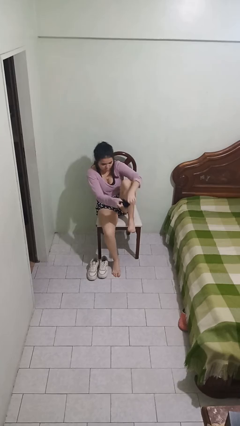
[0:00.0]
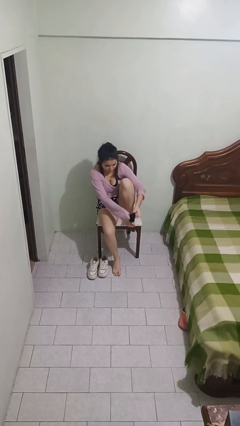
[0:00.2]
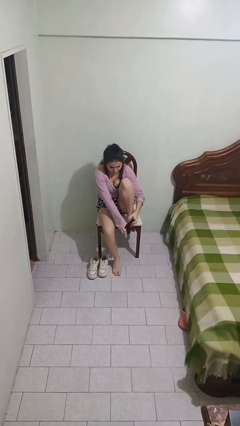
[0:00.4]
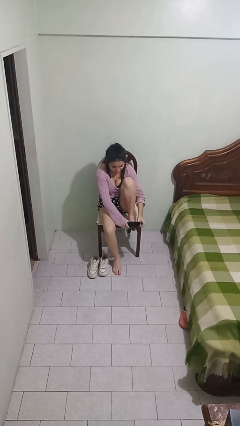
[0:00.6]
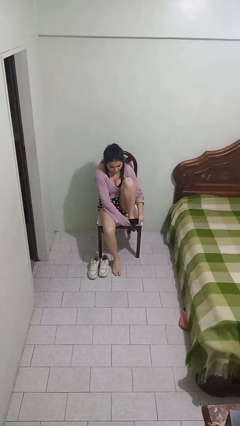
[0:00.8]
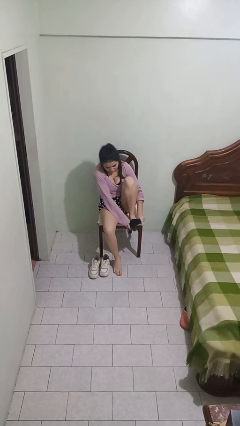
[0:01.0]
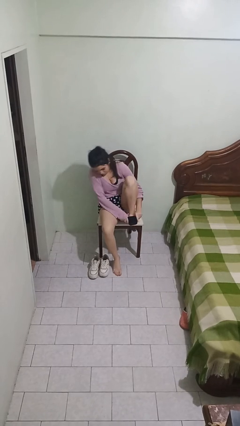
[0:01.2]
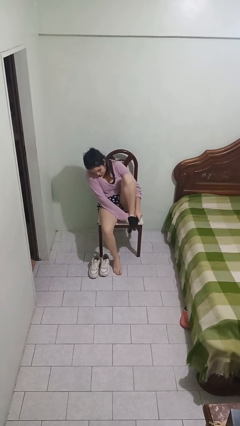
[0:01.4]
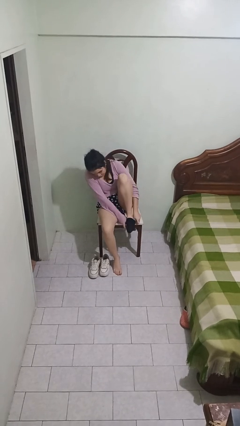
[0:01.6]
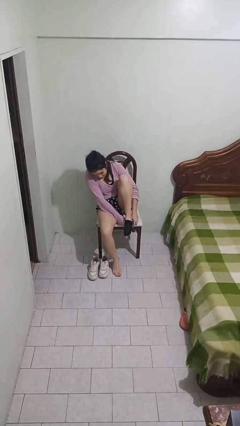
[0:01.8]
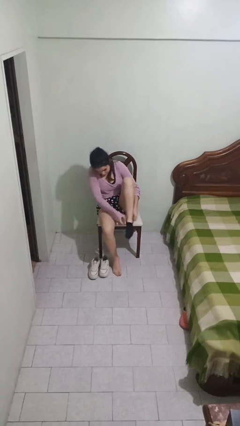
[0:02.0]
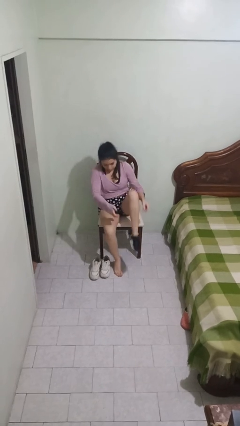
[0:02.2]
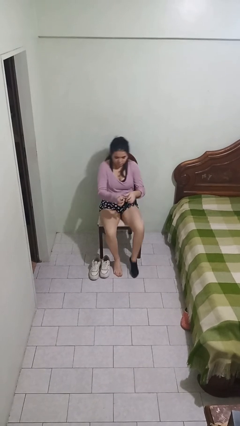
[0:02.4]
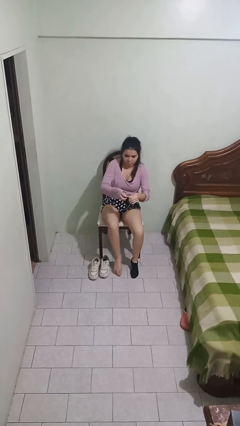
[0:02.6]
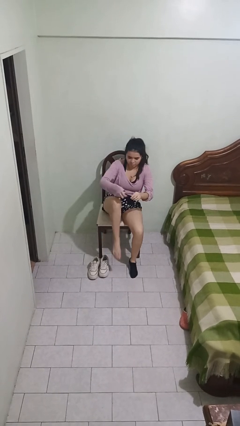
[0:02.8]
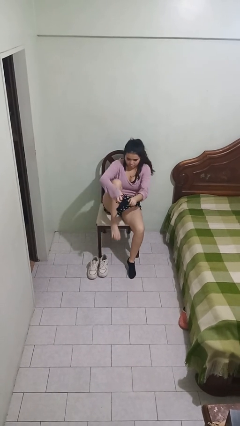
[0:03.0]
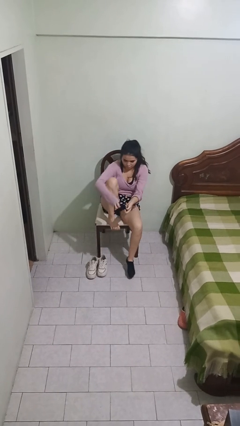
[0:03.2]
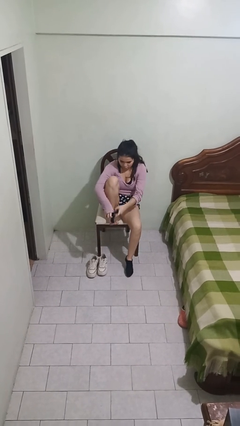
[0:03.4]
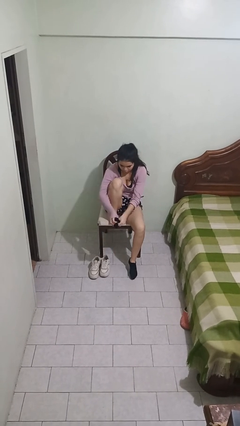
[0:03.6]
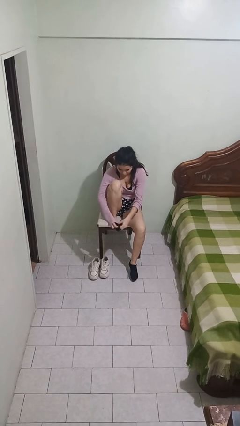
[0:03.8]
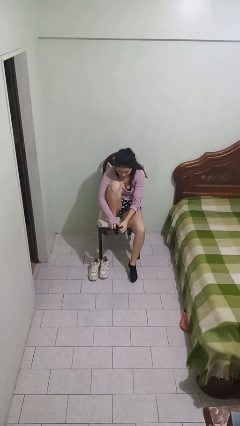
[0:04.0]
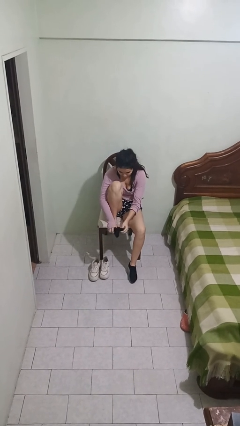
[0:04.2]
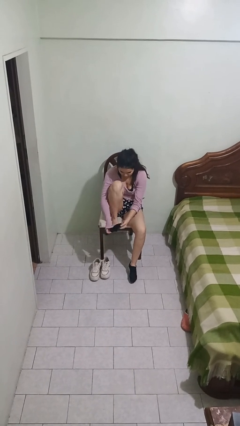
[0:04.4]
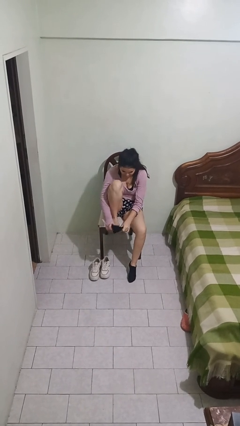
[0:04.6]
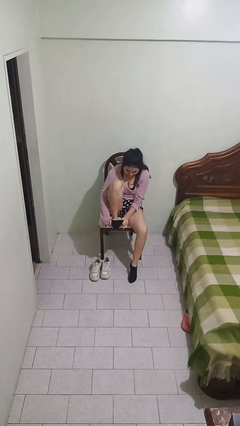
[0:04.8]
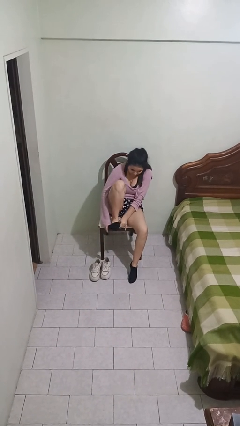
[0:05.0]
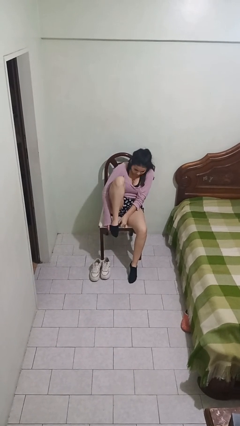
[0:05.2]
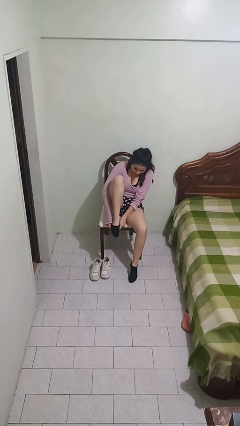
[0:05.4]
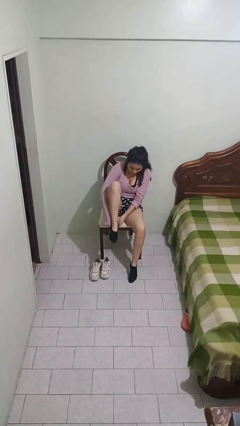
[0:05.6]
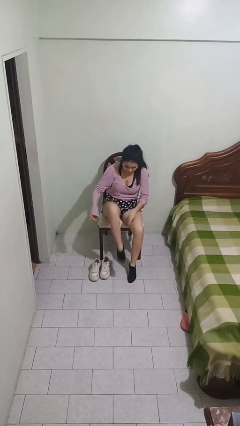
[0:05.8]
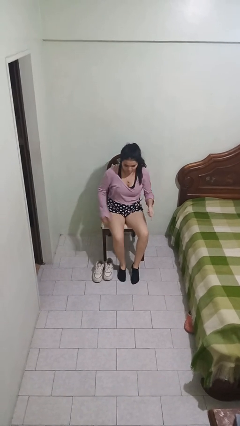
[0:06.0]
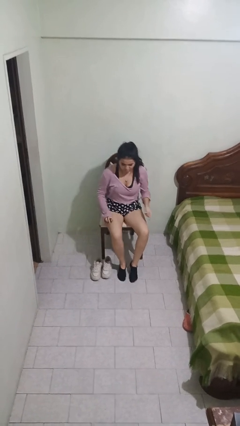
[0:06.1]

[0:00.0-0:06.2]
person puts on socks

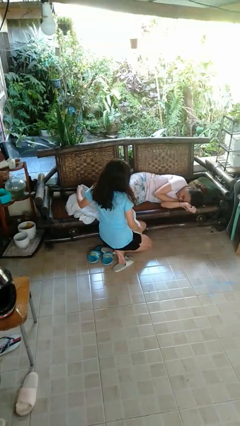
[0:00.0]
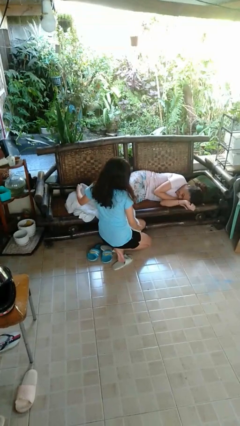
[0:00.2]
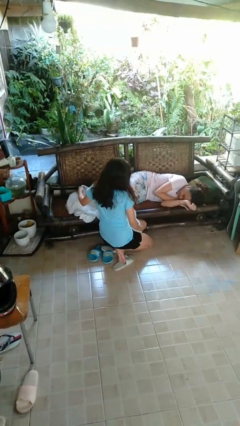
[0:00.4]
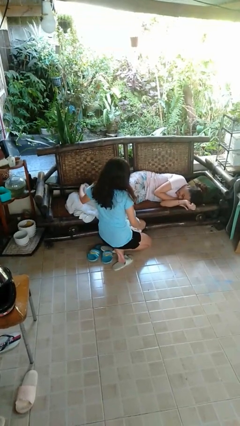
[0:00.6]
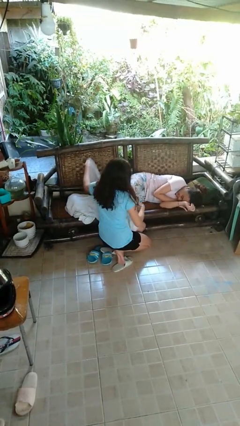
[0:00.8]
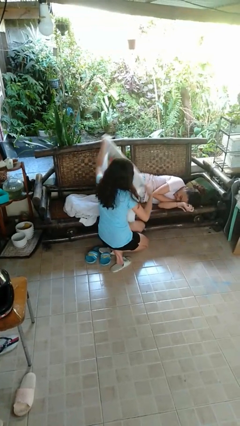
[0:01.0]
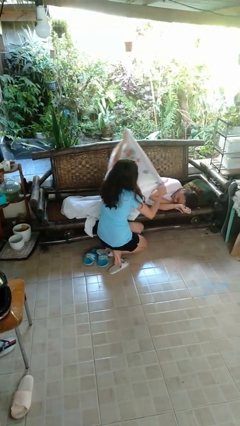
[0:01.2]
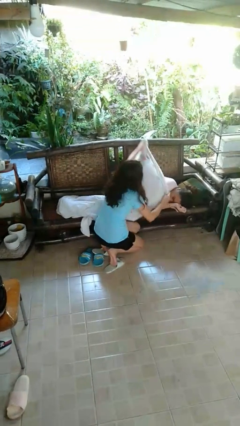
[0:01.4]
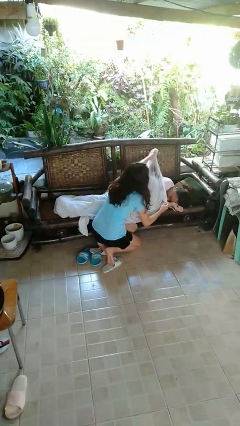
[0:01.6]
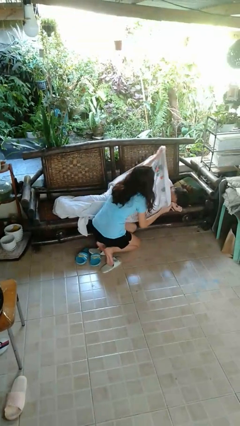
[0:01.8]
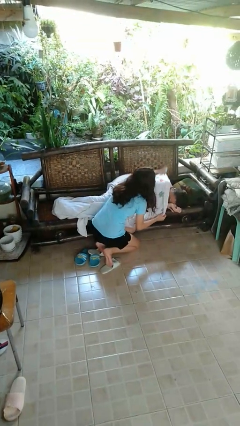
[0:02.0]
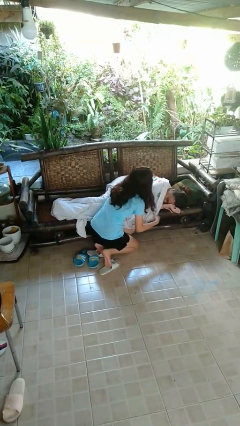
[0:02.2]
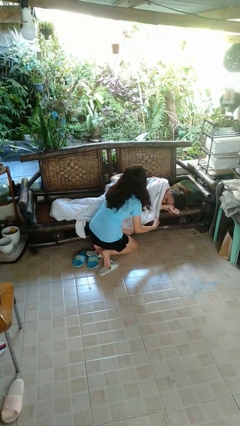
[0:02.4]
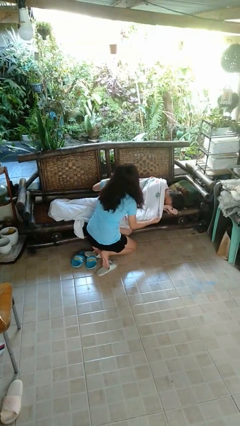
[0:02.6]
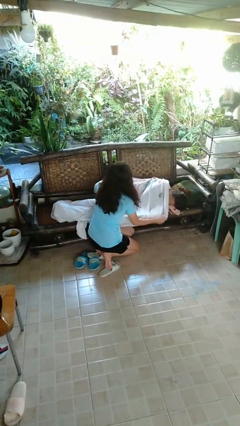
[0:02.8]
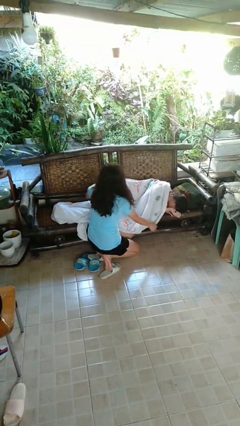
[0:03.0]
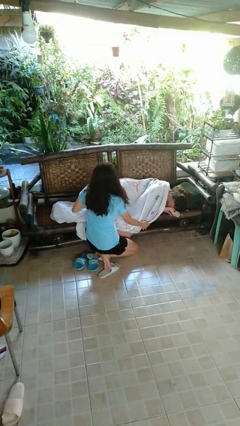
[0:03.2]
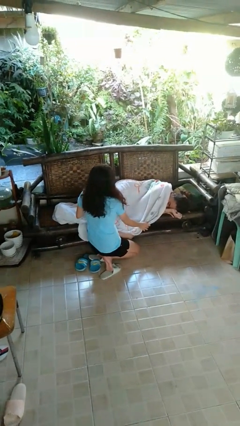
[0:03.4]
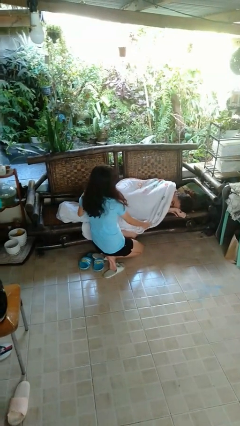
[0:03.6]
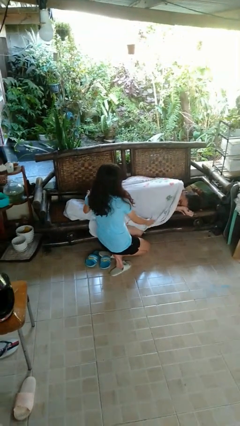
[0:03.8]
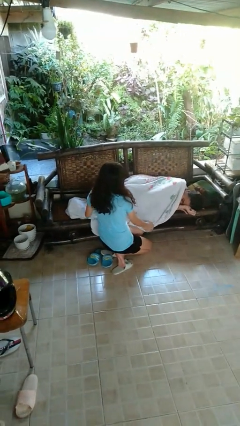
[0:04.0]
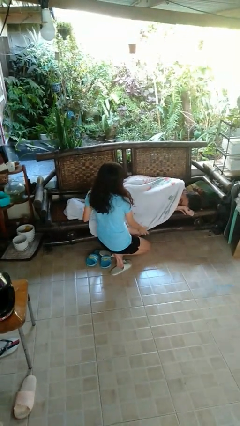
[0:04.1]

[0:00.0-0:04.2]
person covers friend with blanket

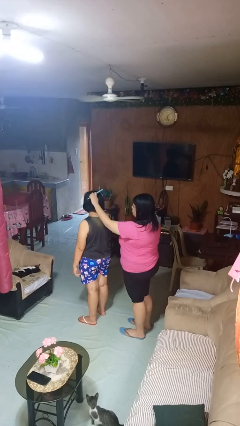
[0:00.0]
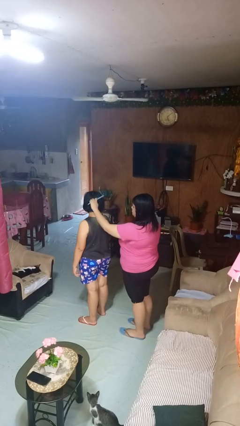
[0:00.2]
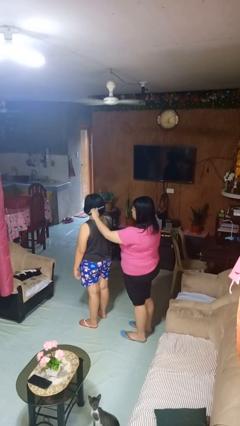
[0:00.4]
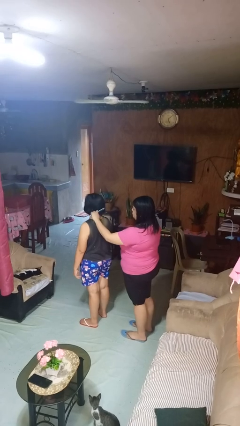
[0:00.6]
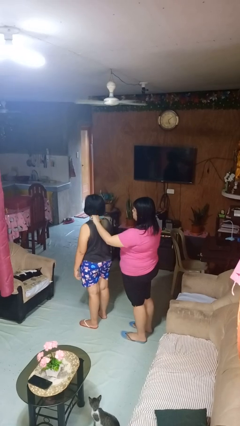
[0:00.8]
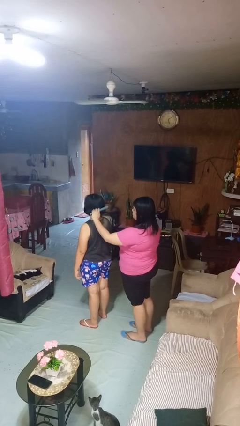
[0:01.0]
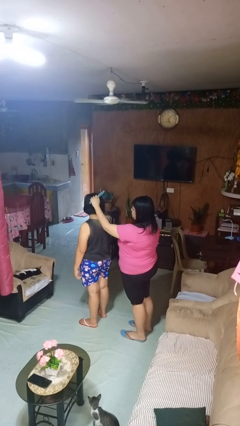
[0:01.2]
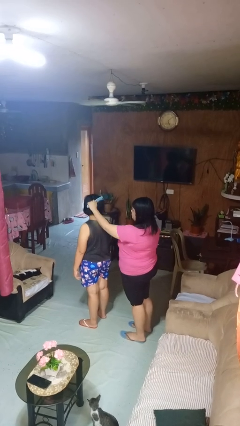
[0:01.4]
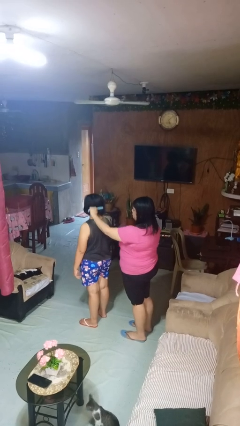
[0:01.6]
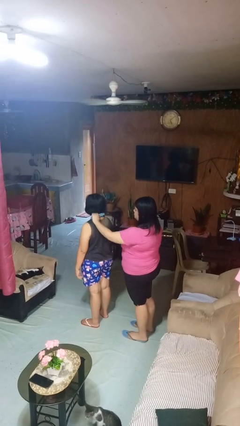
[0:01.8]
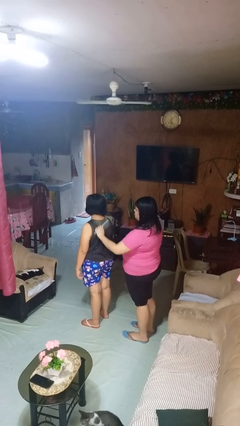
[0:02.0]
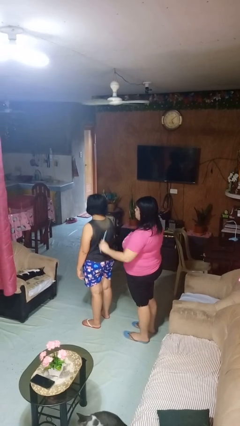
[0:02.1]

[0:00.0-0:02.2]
person brushes hair of person

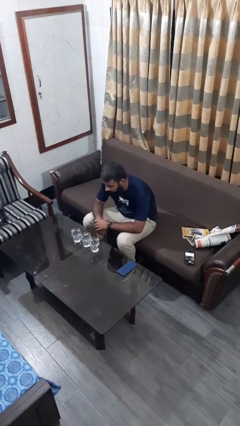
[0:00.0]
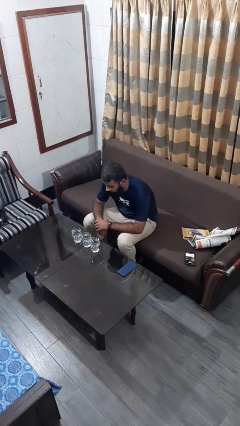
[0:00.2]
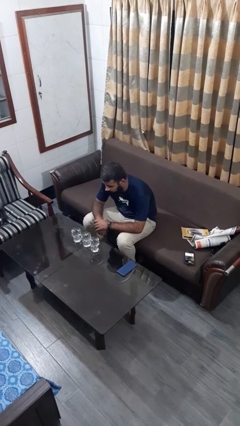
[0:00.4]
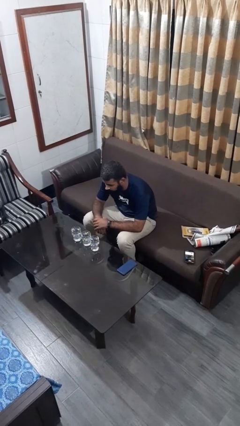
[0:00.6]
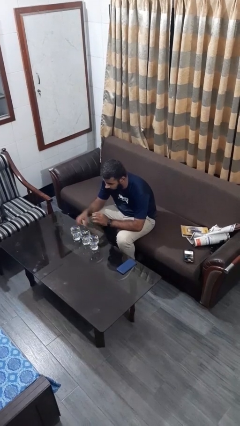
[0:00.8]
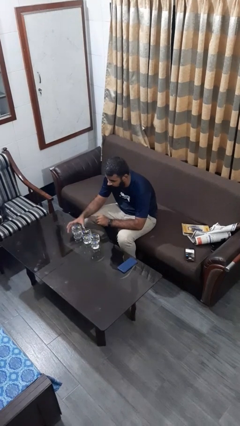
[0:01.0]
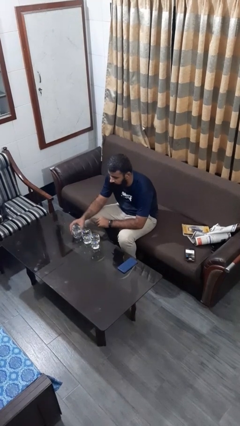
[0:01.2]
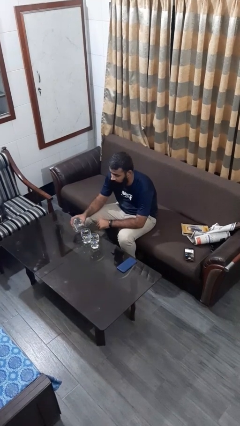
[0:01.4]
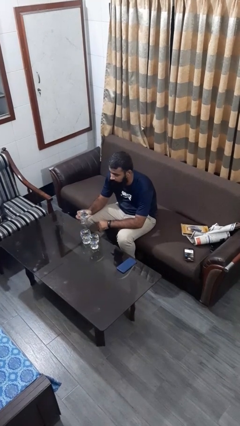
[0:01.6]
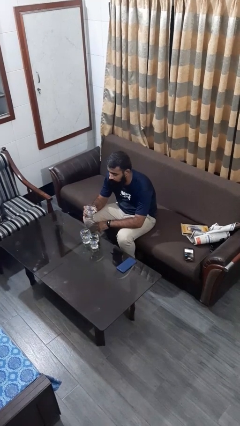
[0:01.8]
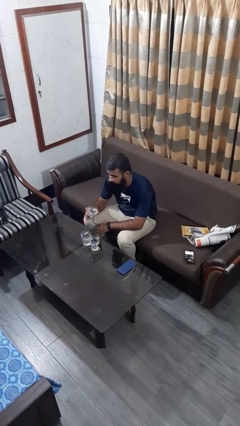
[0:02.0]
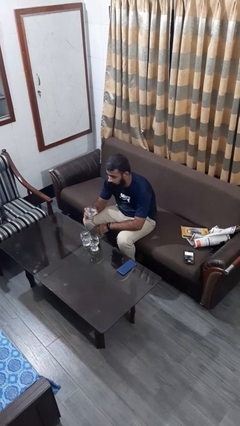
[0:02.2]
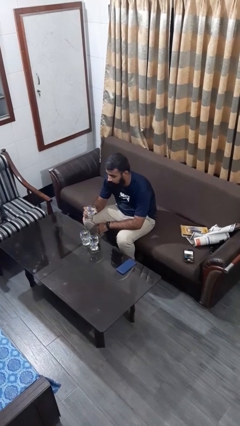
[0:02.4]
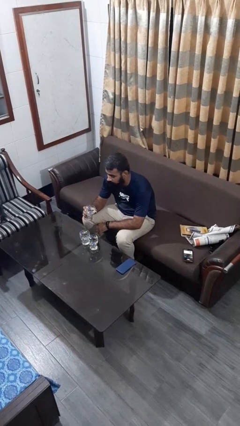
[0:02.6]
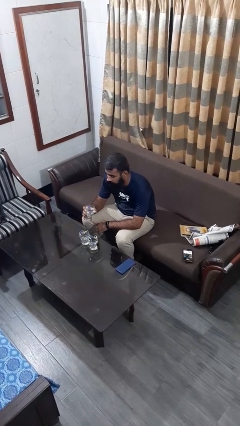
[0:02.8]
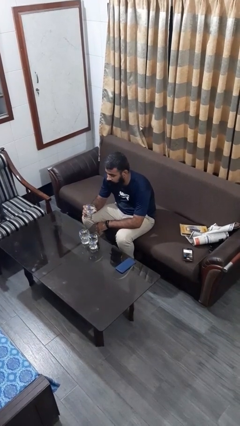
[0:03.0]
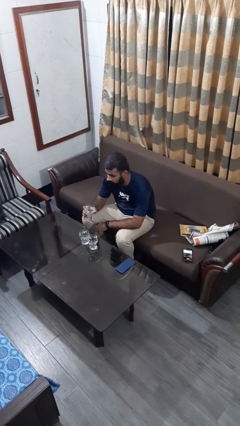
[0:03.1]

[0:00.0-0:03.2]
person picks up object from table

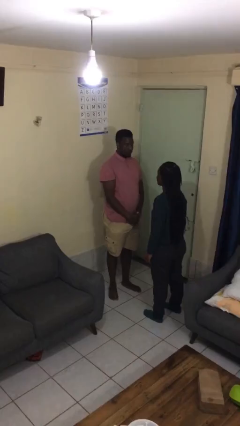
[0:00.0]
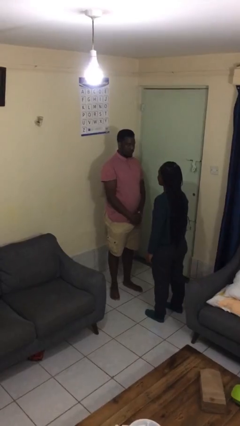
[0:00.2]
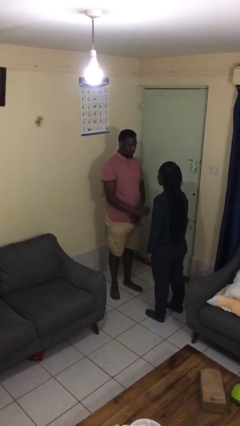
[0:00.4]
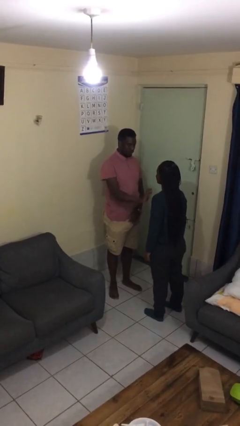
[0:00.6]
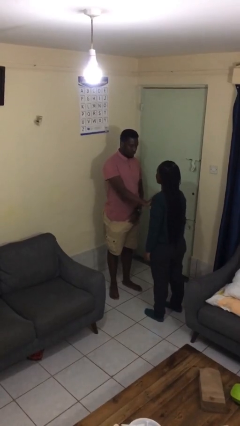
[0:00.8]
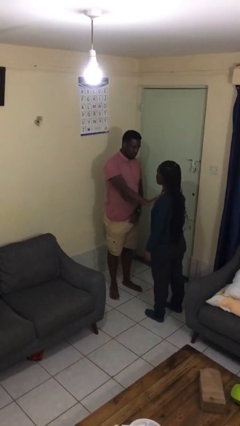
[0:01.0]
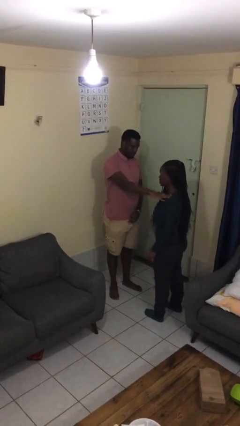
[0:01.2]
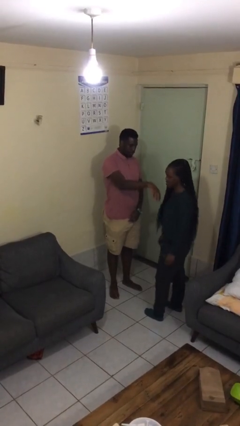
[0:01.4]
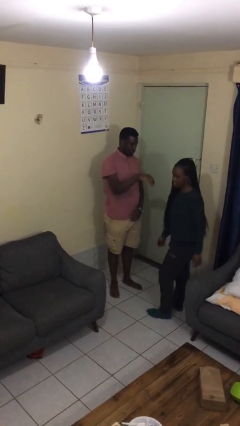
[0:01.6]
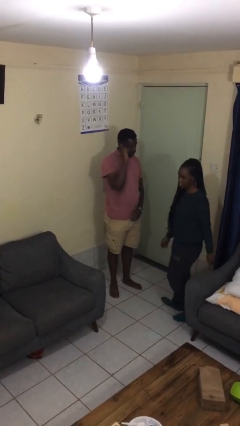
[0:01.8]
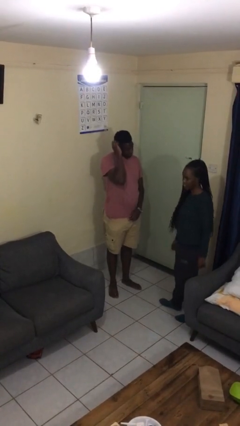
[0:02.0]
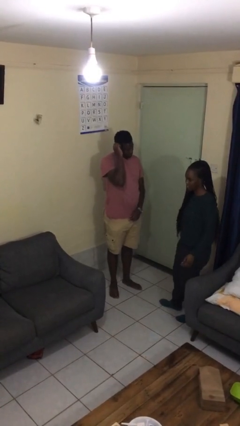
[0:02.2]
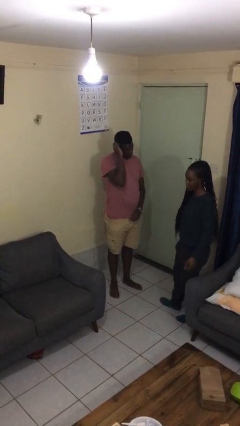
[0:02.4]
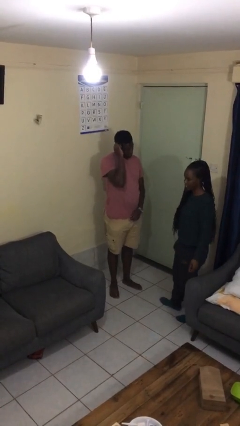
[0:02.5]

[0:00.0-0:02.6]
person shoves person
